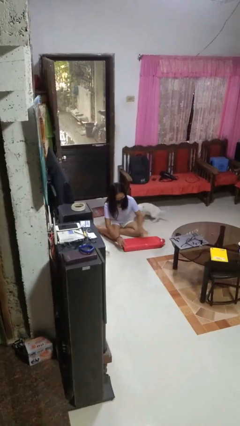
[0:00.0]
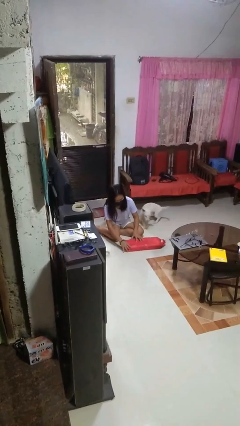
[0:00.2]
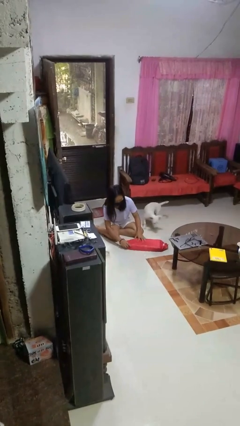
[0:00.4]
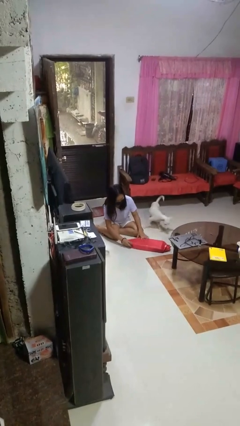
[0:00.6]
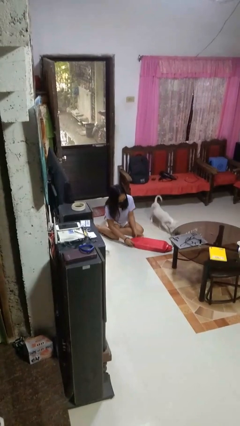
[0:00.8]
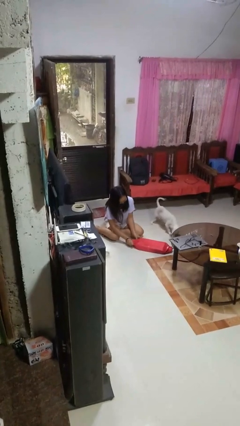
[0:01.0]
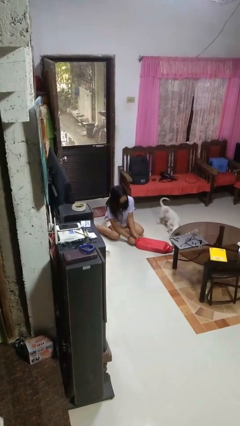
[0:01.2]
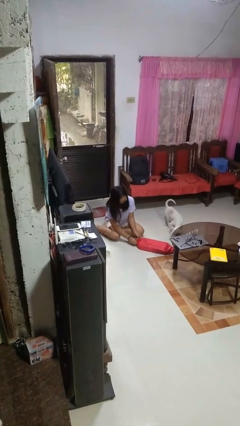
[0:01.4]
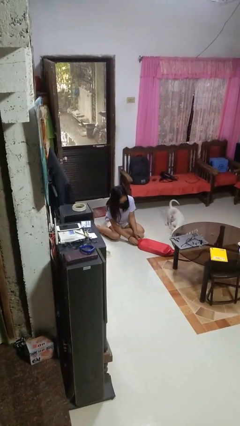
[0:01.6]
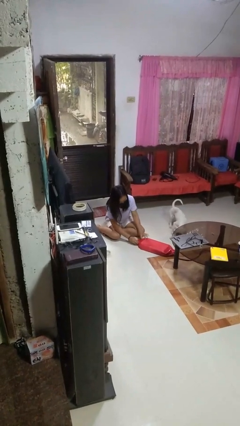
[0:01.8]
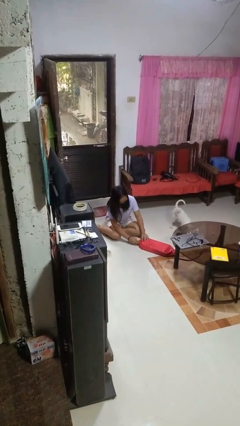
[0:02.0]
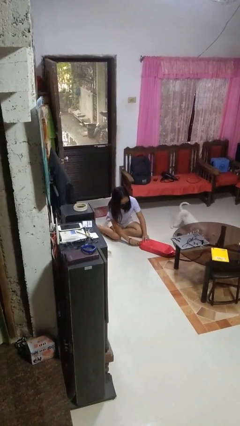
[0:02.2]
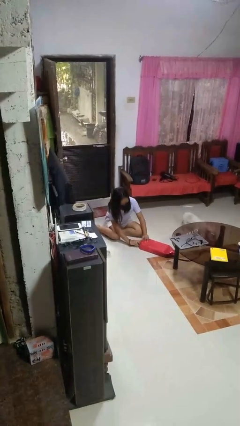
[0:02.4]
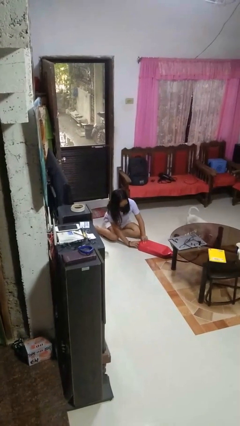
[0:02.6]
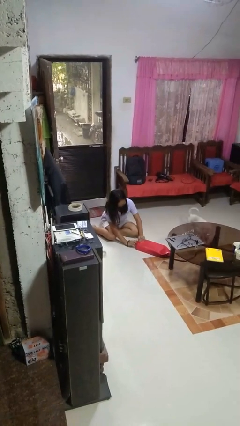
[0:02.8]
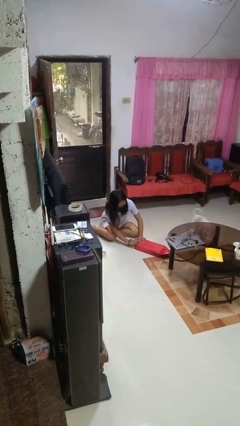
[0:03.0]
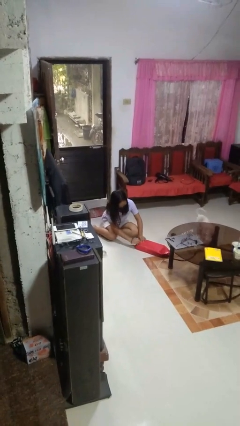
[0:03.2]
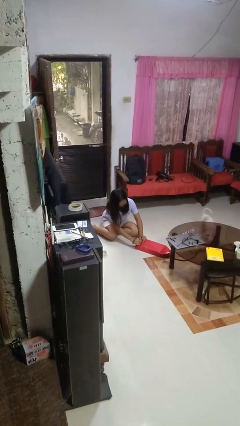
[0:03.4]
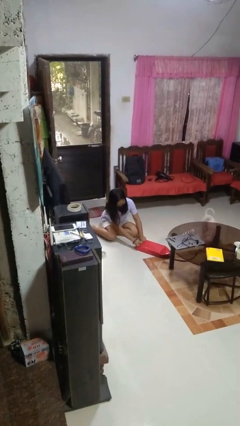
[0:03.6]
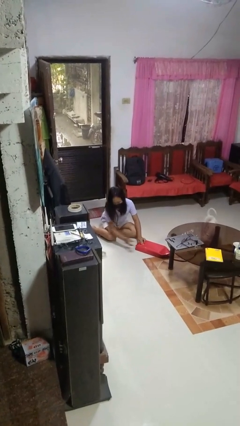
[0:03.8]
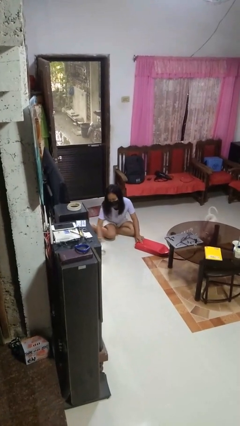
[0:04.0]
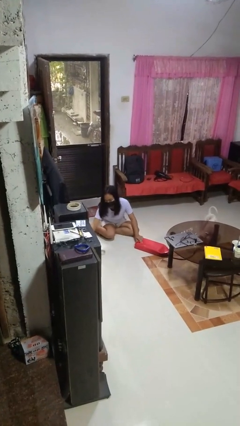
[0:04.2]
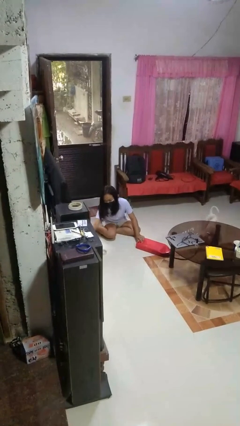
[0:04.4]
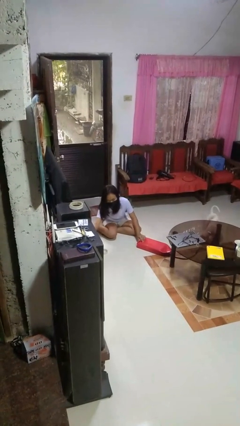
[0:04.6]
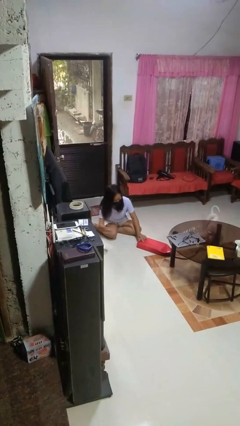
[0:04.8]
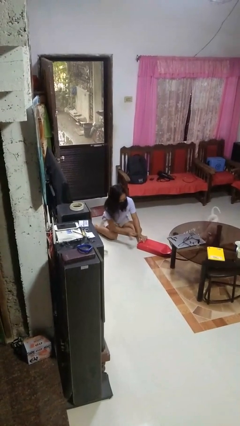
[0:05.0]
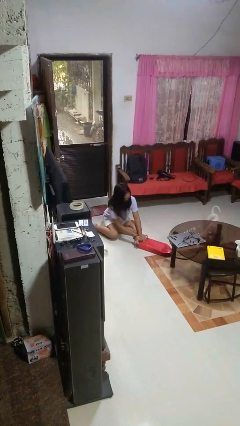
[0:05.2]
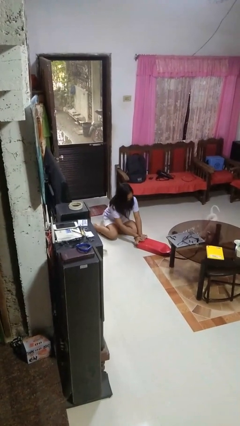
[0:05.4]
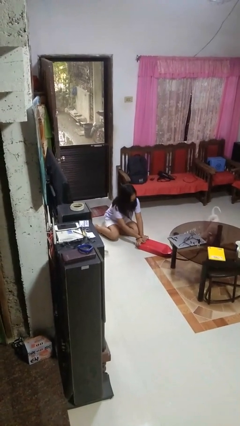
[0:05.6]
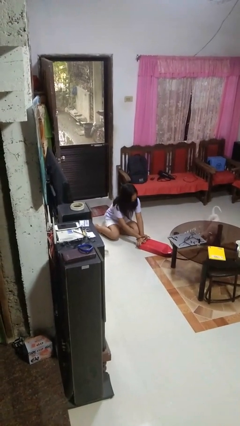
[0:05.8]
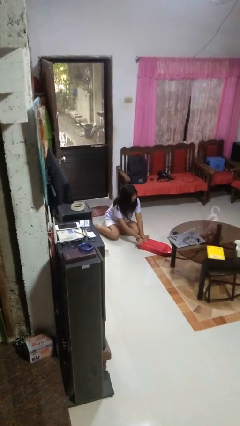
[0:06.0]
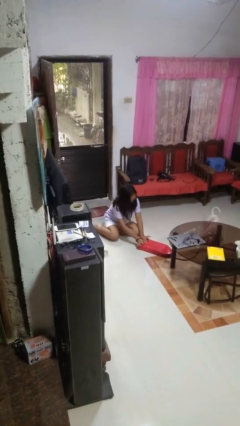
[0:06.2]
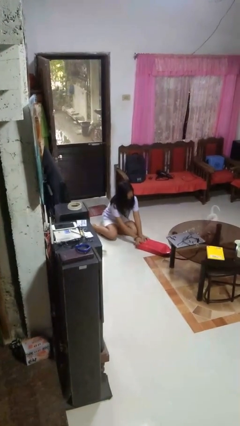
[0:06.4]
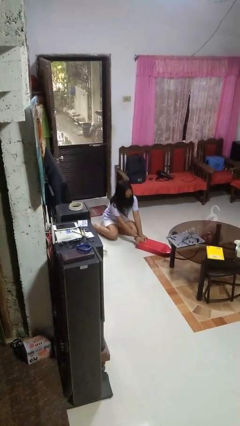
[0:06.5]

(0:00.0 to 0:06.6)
person wraps box

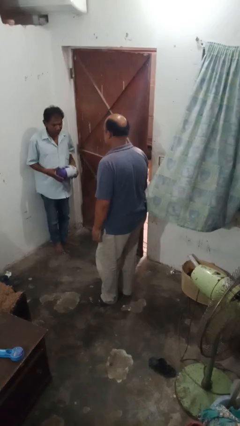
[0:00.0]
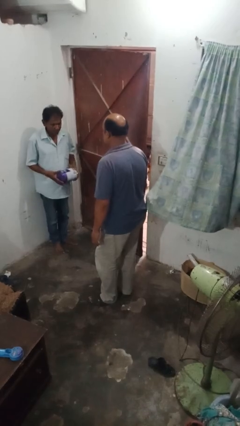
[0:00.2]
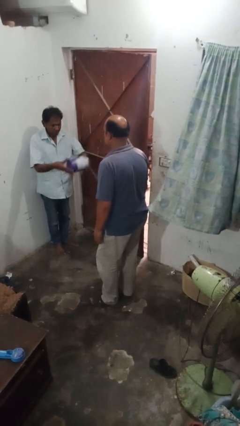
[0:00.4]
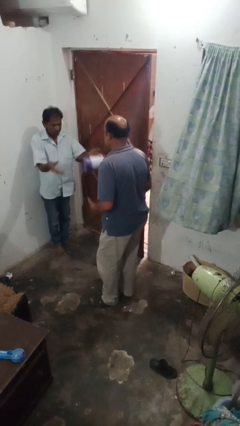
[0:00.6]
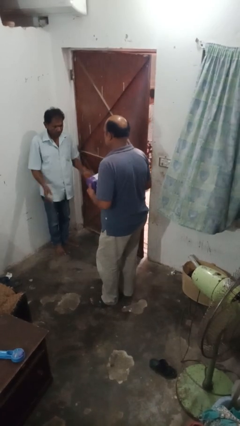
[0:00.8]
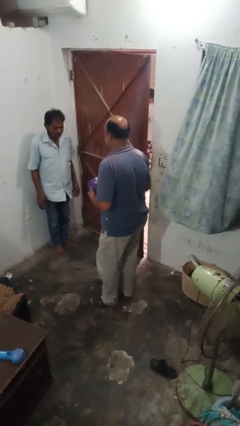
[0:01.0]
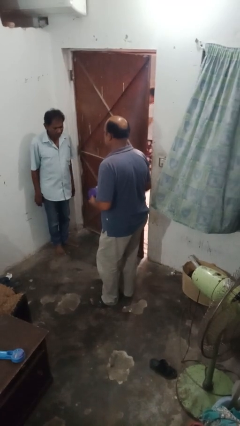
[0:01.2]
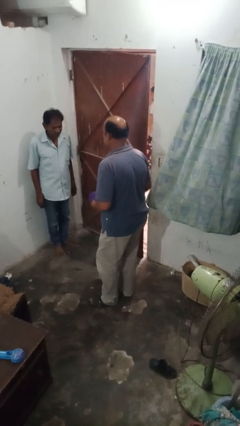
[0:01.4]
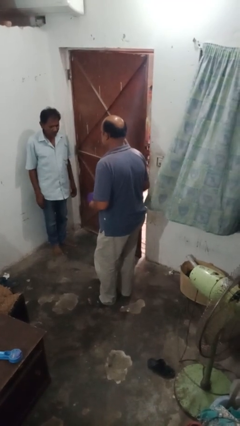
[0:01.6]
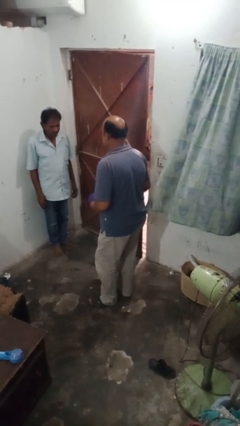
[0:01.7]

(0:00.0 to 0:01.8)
person catches object from person

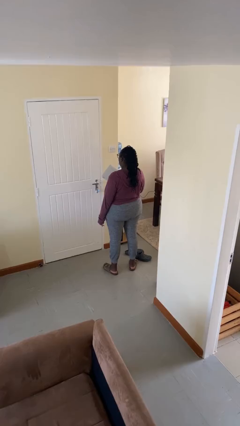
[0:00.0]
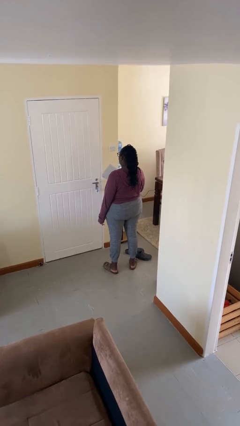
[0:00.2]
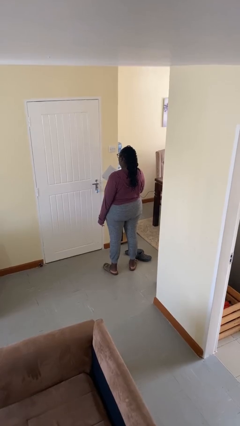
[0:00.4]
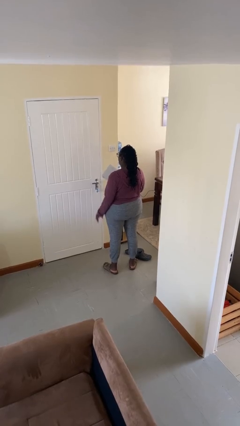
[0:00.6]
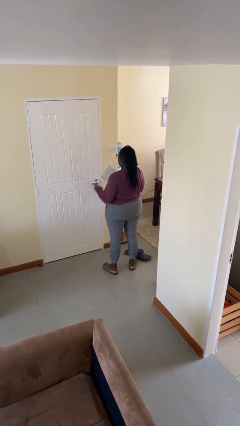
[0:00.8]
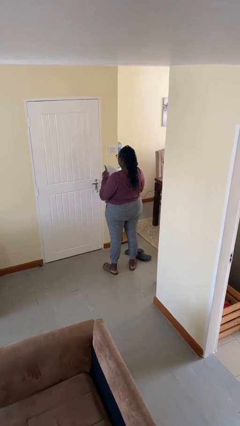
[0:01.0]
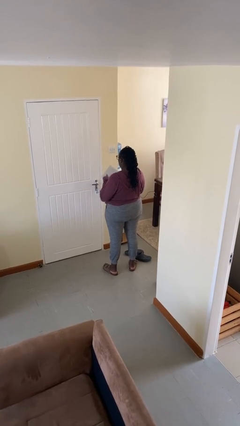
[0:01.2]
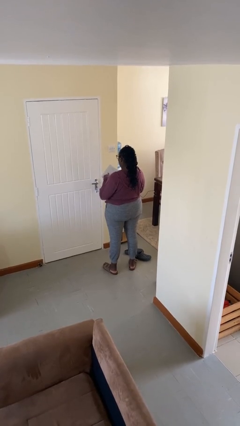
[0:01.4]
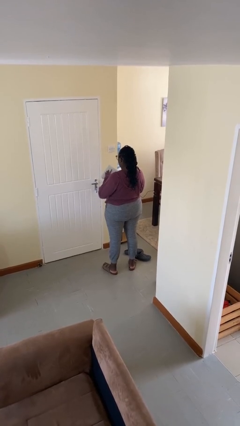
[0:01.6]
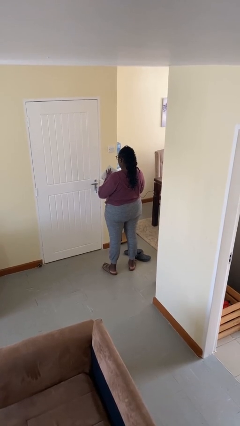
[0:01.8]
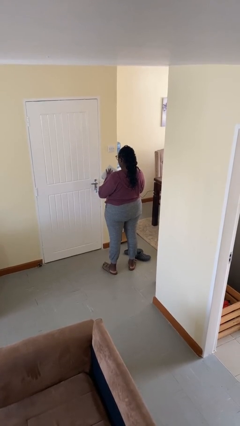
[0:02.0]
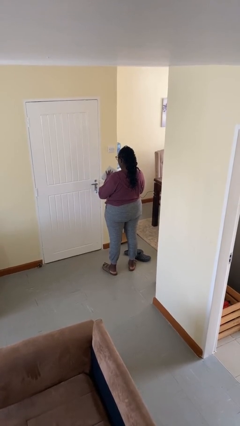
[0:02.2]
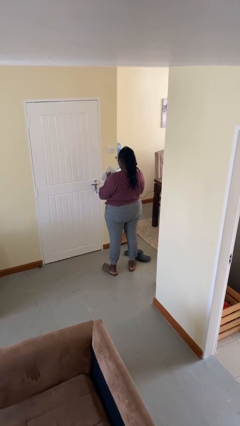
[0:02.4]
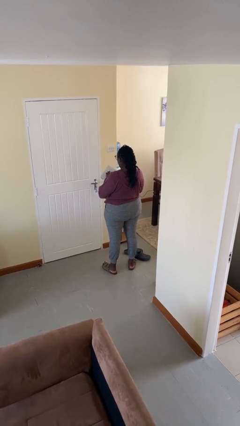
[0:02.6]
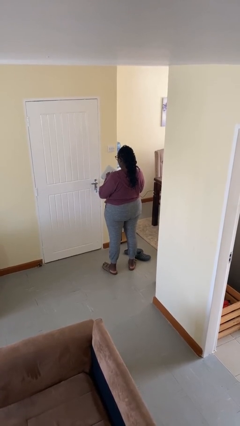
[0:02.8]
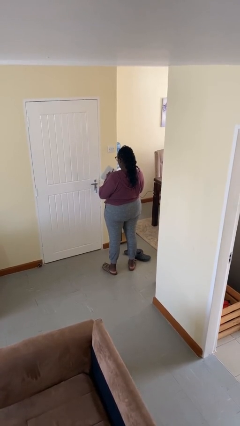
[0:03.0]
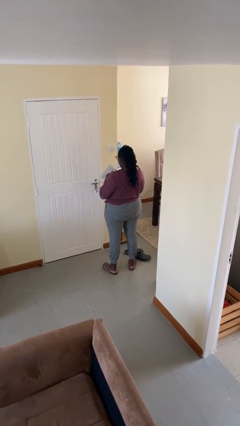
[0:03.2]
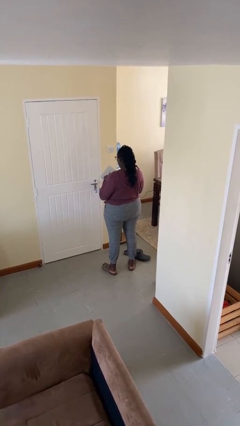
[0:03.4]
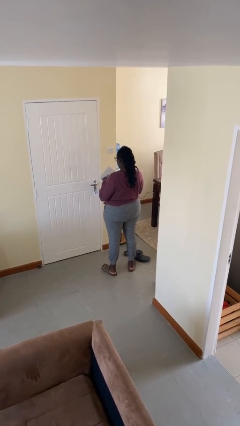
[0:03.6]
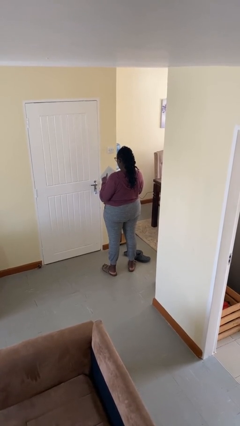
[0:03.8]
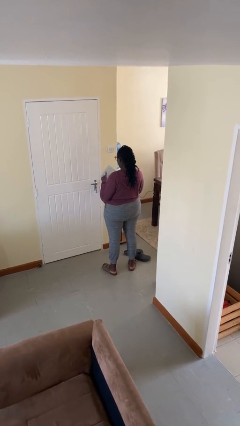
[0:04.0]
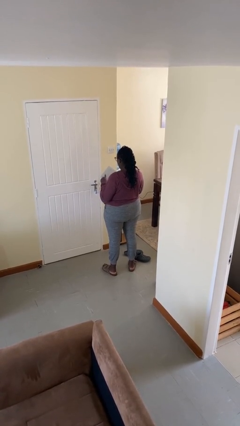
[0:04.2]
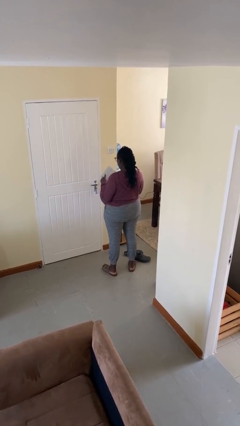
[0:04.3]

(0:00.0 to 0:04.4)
person taps object with finger

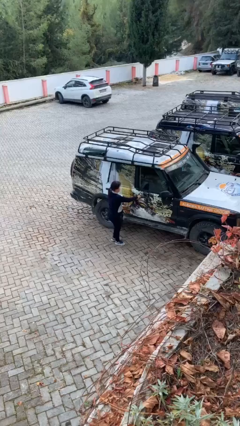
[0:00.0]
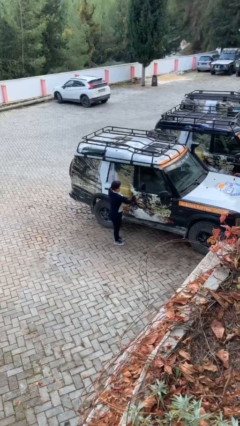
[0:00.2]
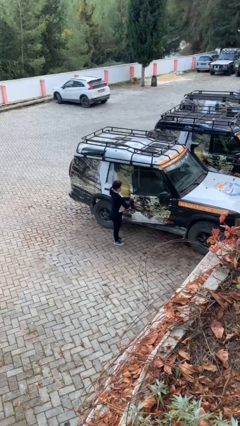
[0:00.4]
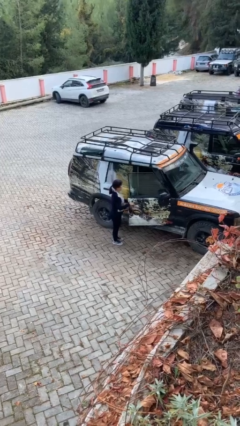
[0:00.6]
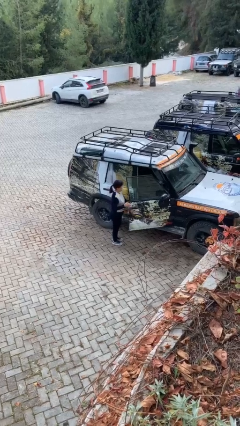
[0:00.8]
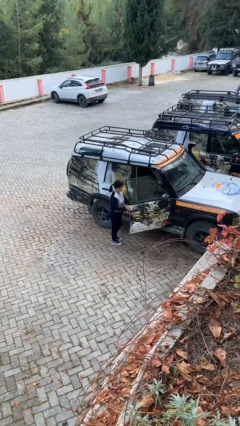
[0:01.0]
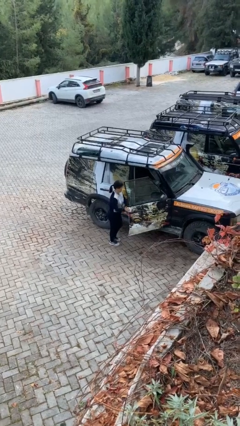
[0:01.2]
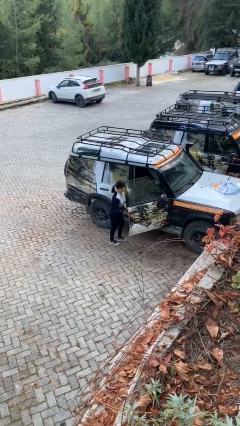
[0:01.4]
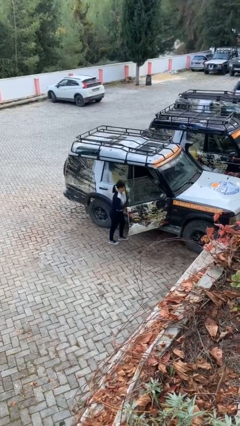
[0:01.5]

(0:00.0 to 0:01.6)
person opens car door

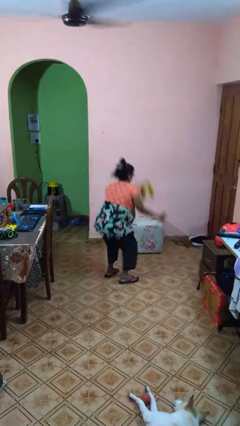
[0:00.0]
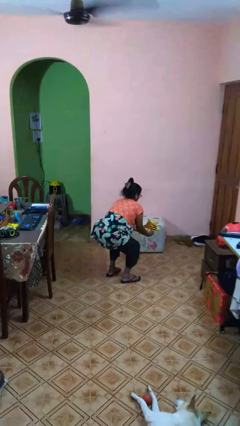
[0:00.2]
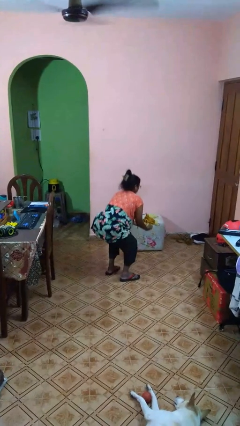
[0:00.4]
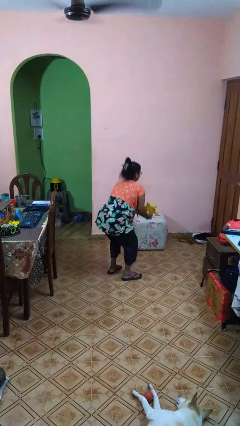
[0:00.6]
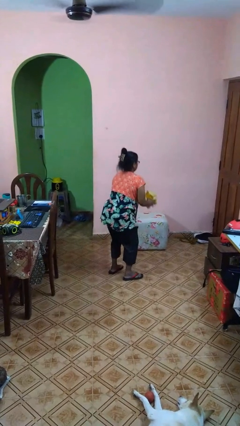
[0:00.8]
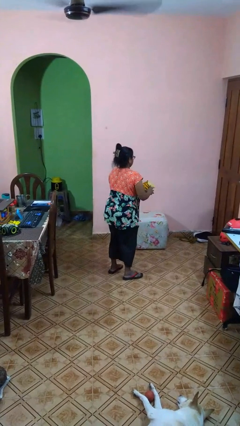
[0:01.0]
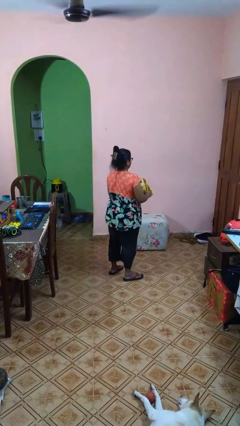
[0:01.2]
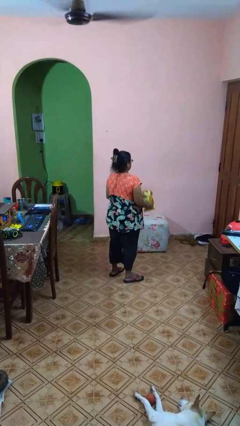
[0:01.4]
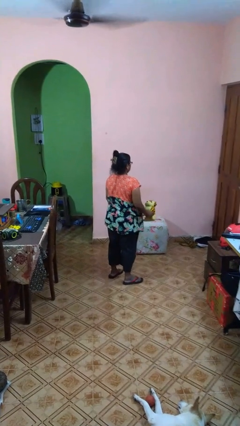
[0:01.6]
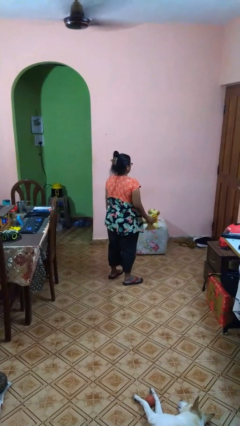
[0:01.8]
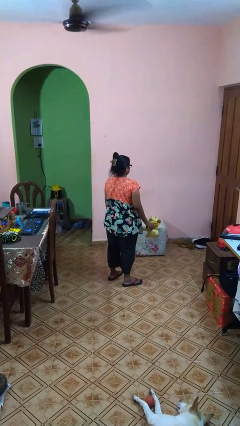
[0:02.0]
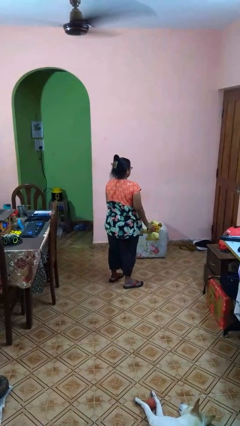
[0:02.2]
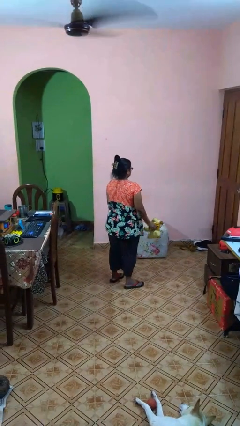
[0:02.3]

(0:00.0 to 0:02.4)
person catches dropped object

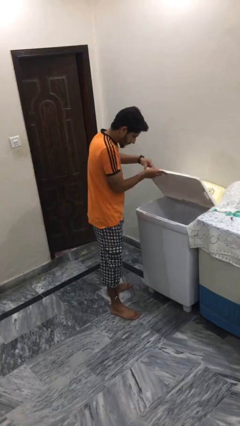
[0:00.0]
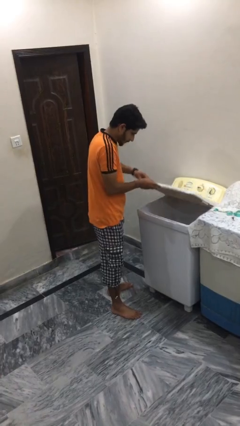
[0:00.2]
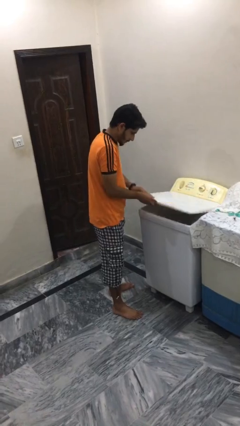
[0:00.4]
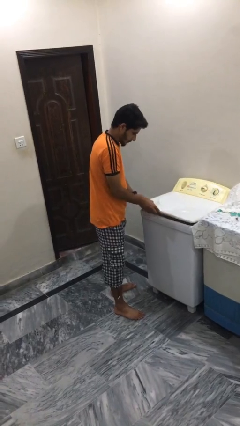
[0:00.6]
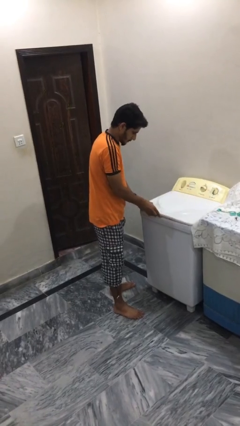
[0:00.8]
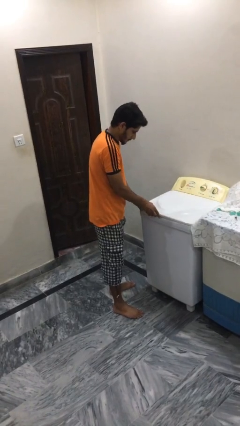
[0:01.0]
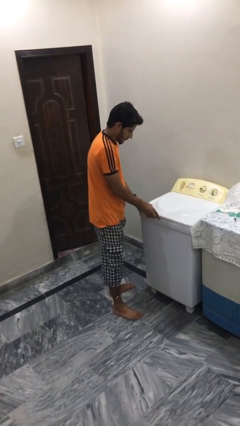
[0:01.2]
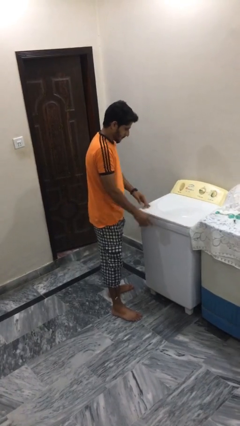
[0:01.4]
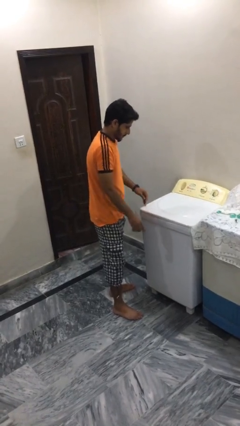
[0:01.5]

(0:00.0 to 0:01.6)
person closes clothes washer
